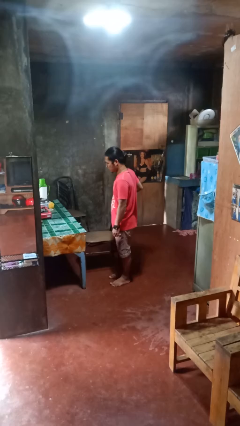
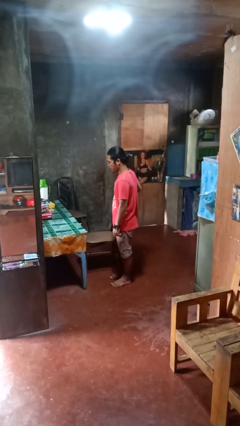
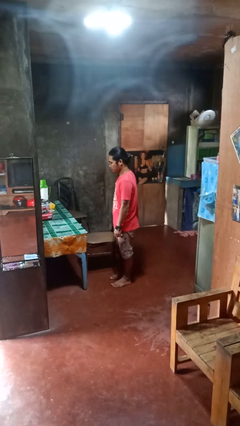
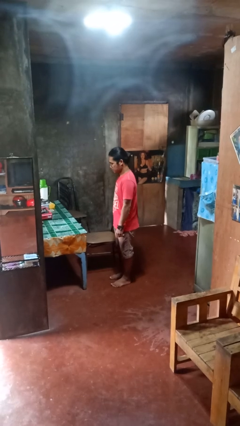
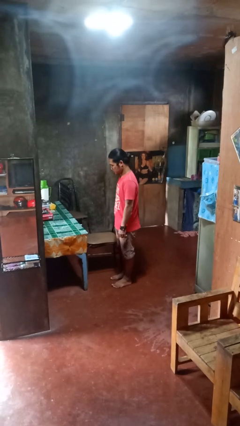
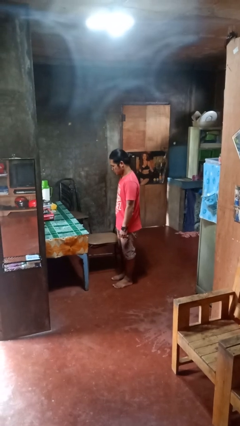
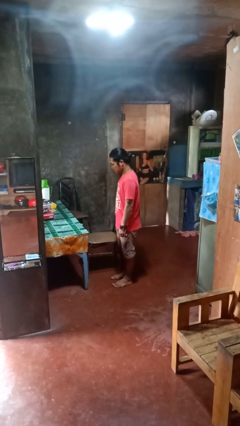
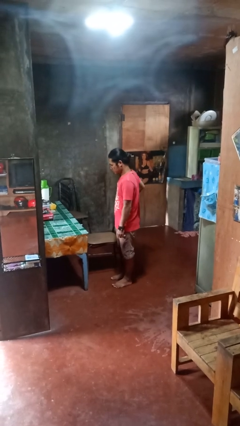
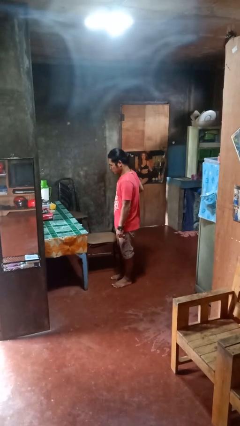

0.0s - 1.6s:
person pulls out chair

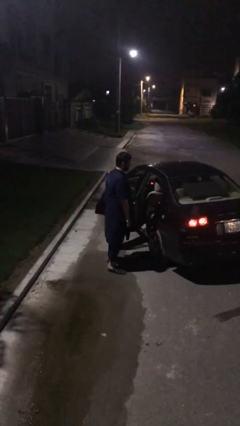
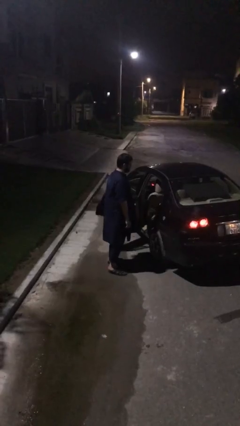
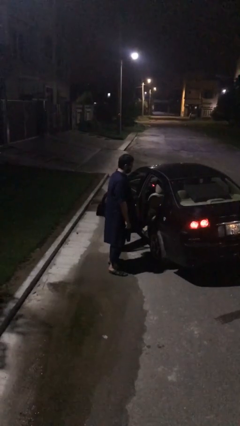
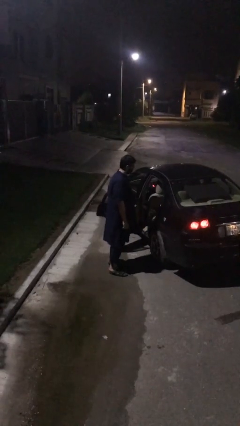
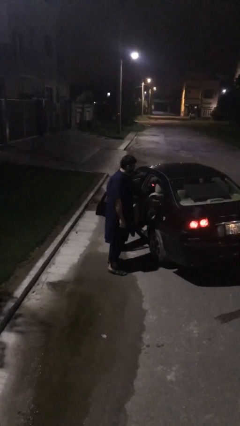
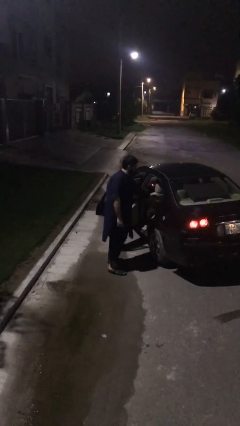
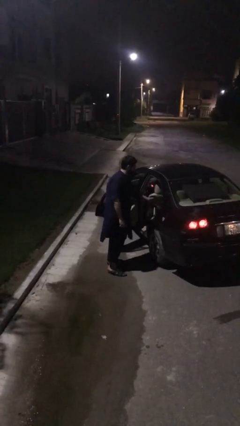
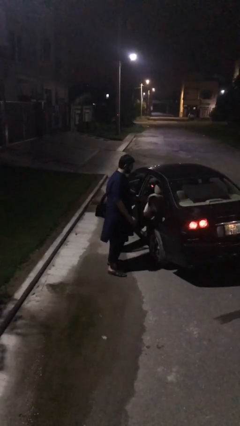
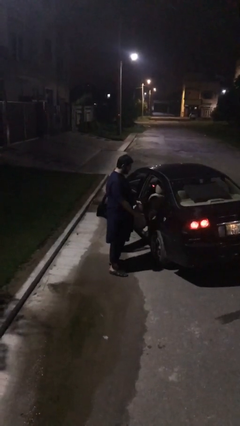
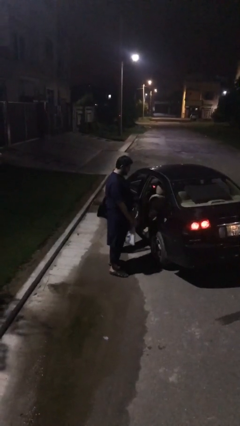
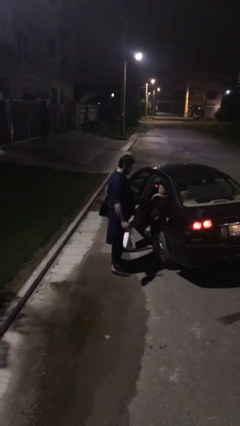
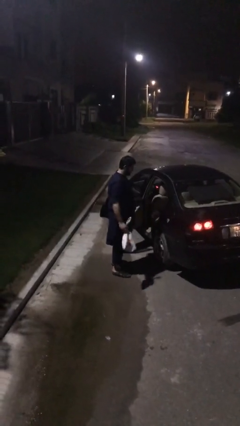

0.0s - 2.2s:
person unloads car

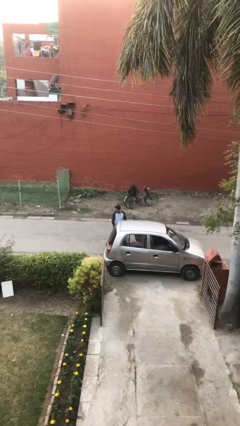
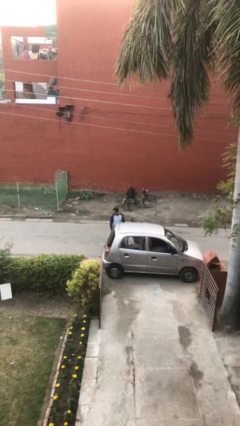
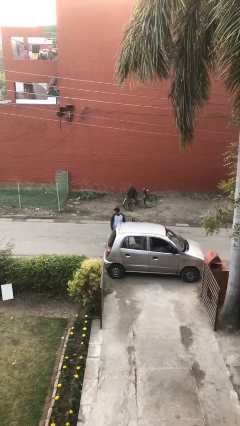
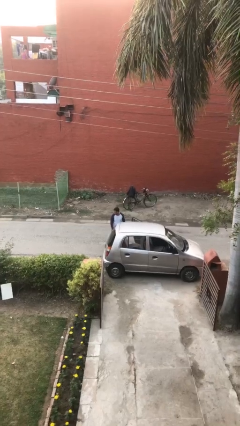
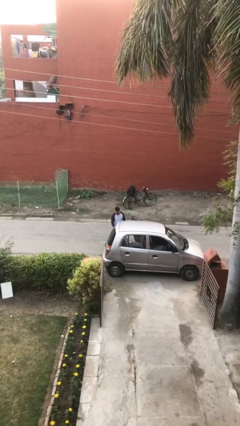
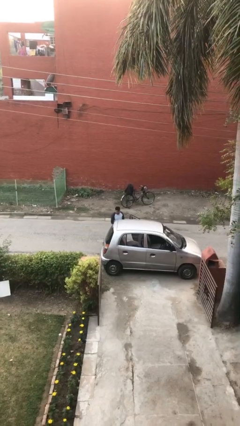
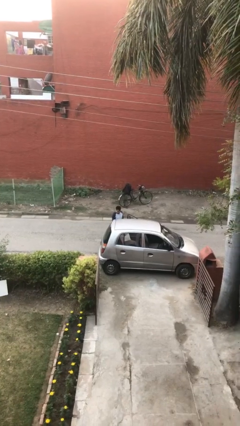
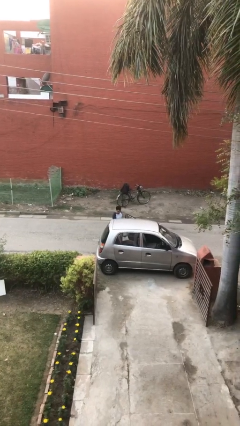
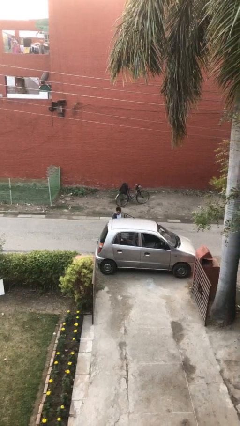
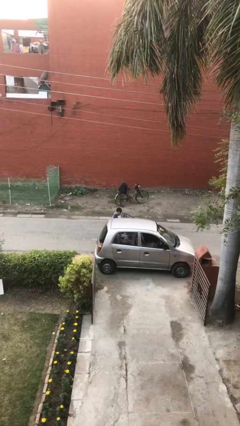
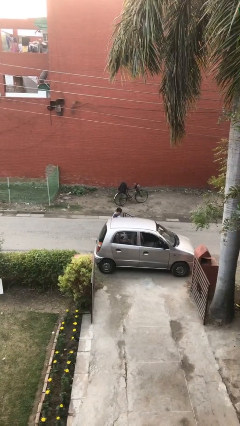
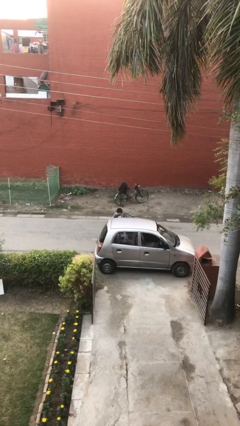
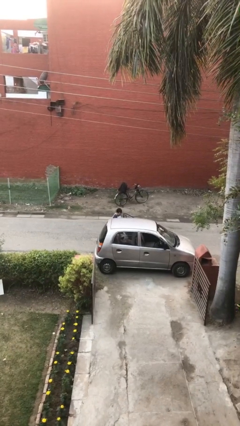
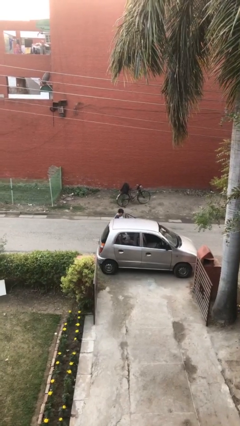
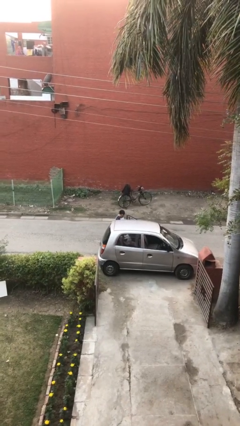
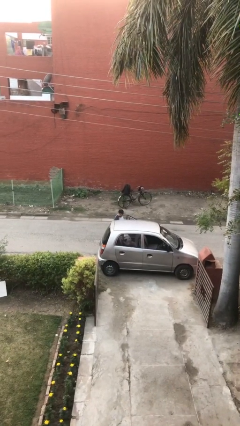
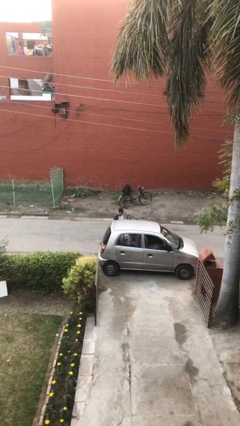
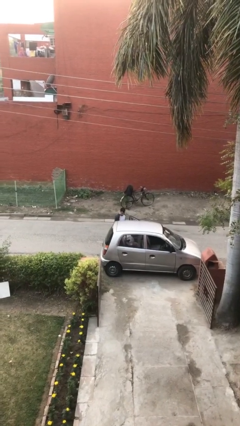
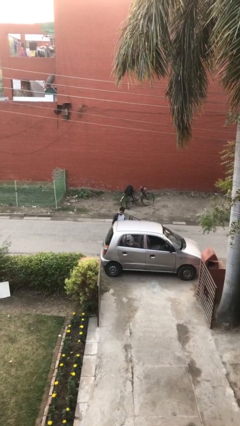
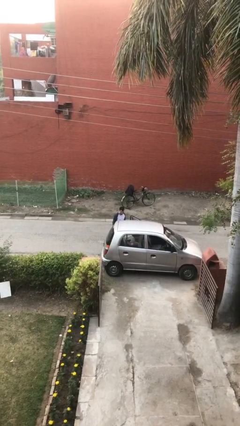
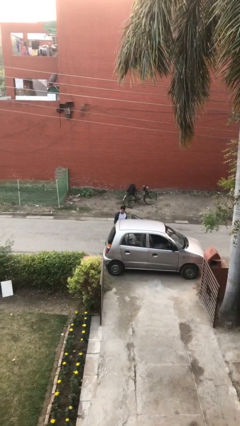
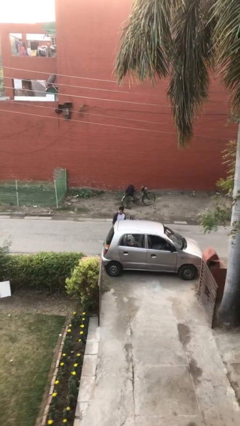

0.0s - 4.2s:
person loads car

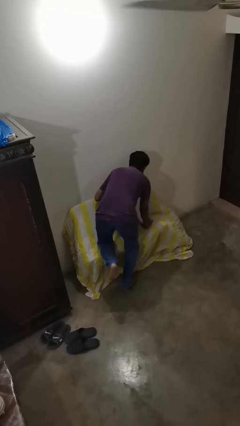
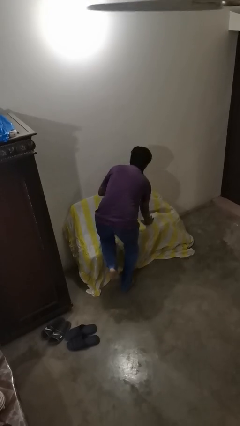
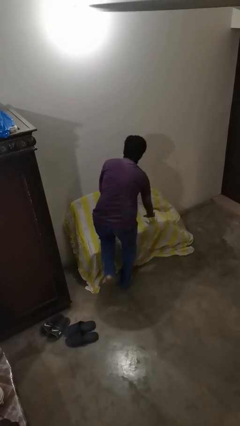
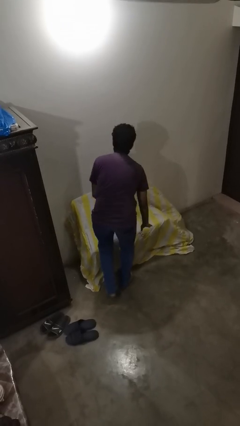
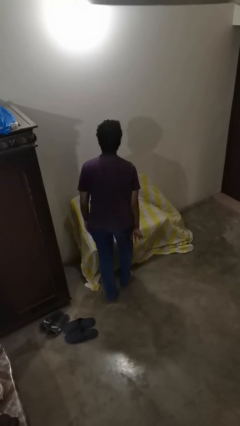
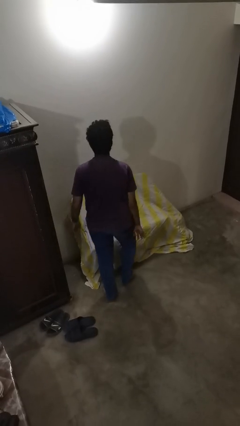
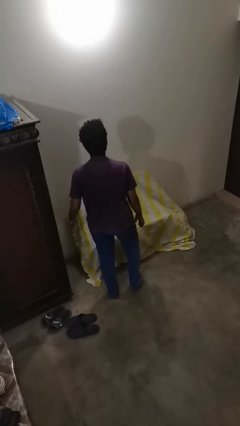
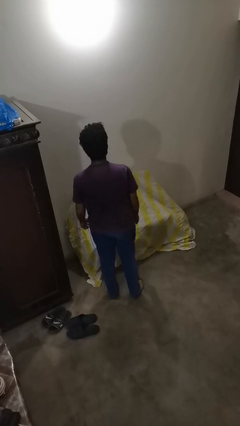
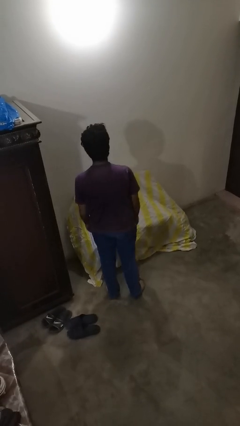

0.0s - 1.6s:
person stands up

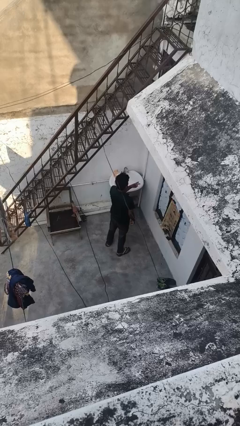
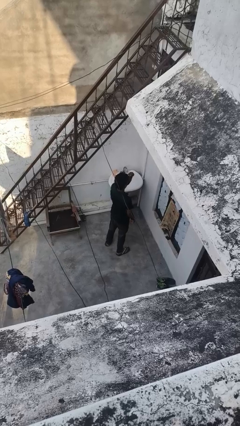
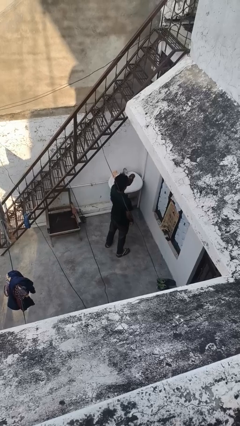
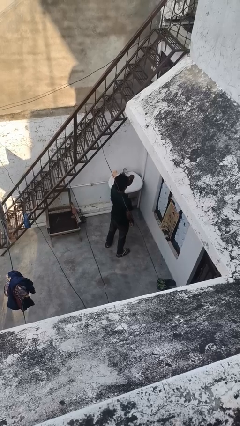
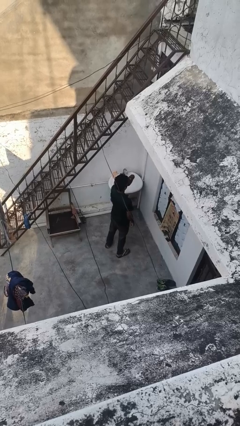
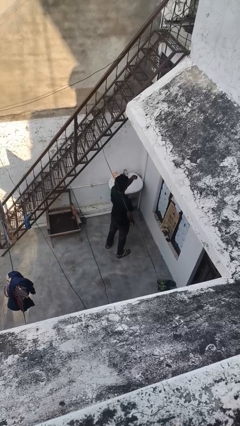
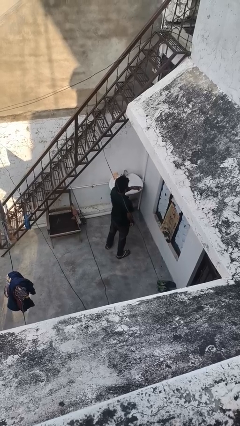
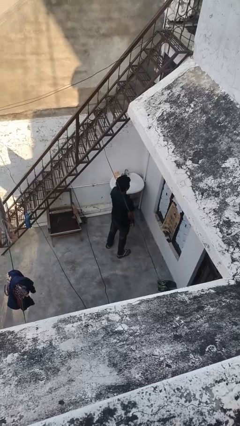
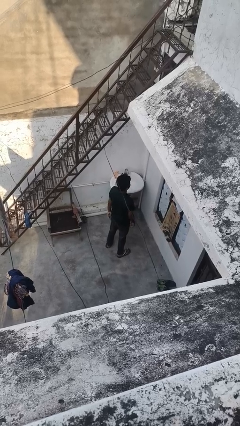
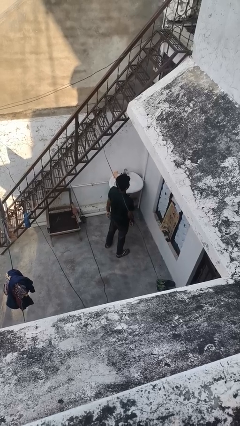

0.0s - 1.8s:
person gestures watch closely

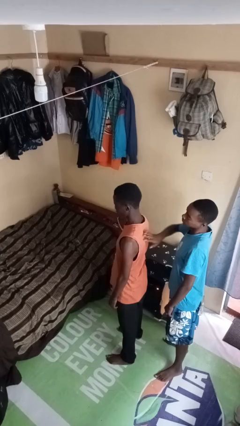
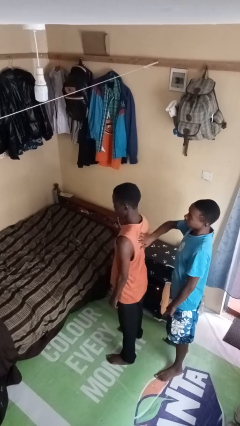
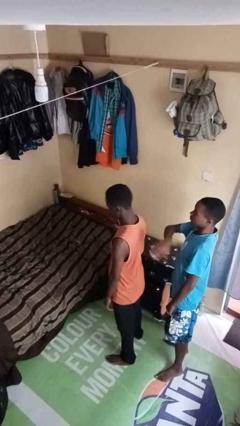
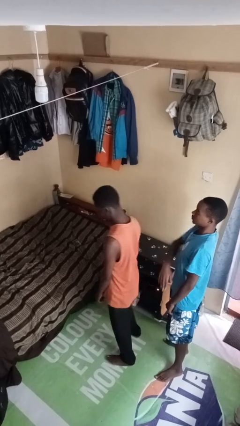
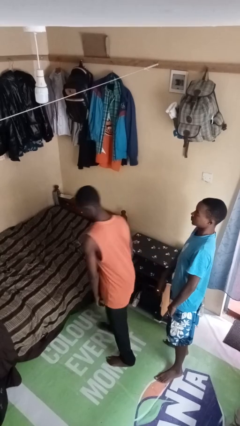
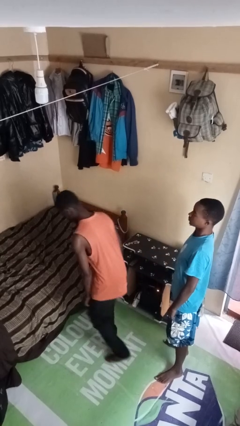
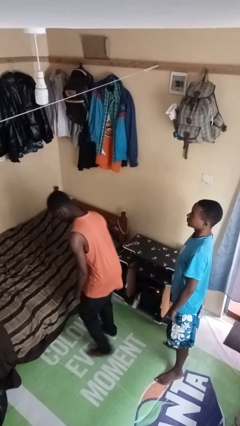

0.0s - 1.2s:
person shoves person

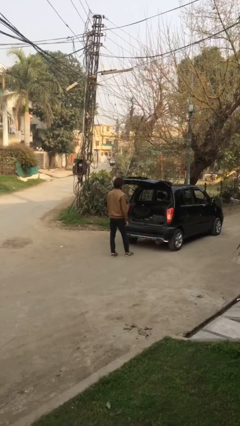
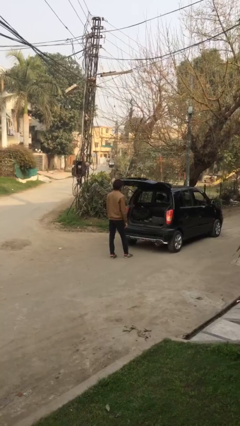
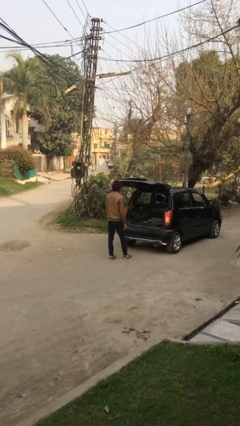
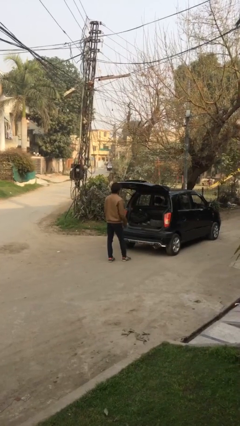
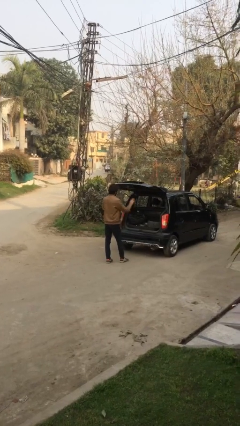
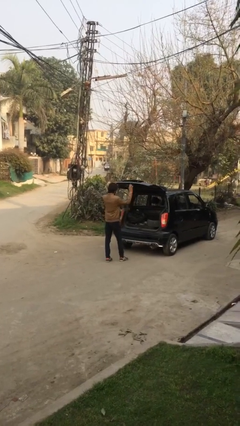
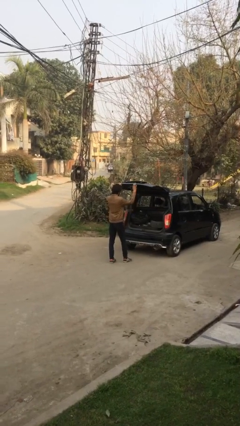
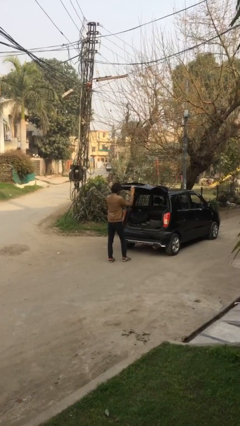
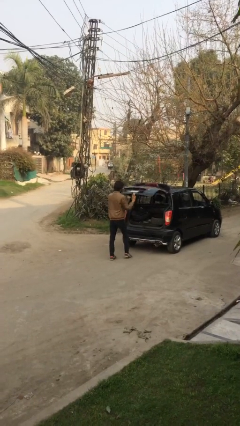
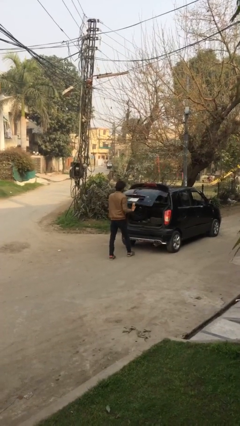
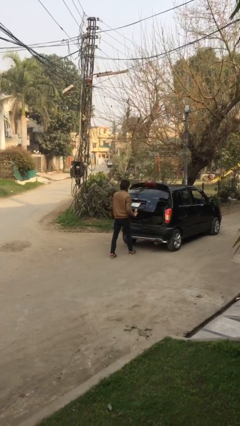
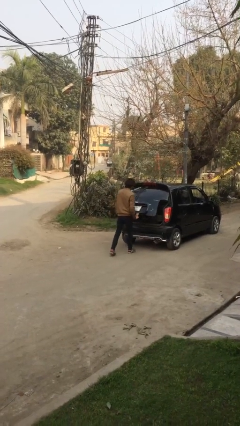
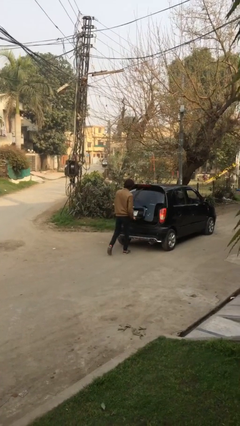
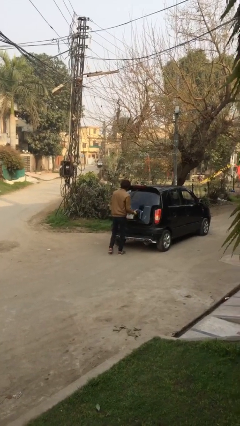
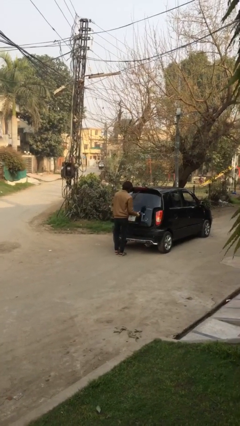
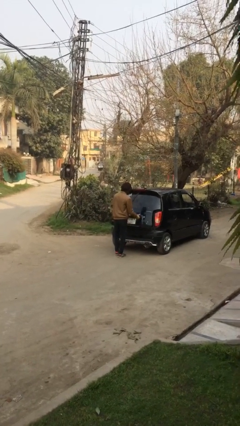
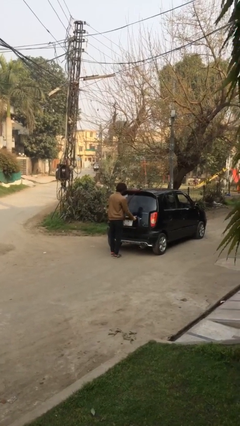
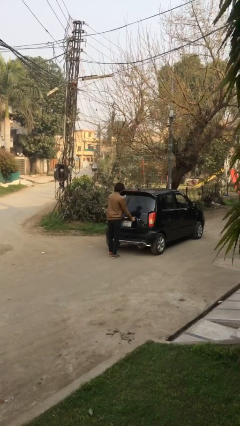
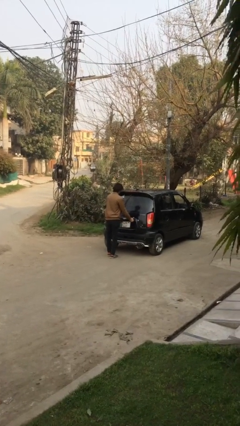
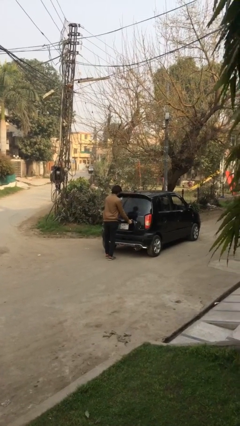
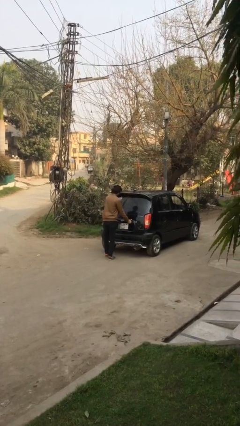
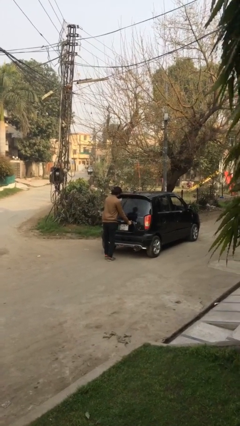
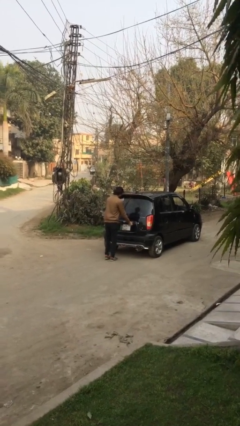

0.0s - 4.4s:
person closes car trunk

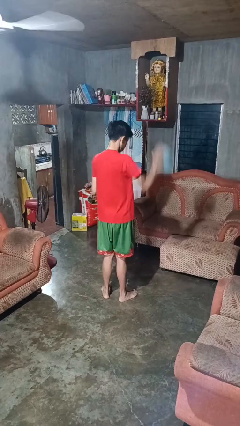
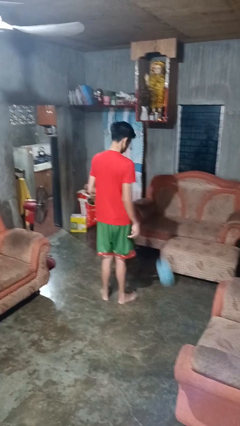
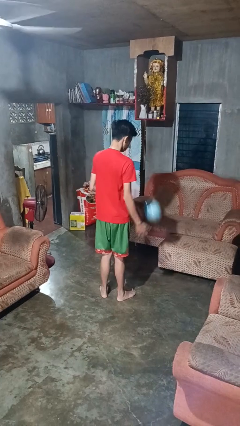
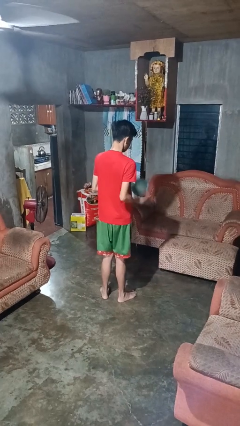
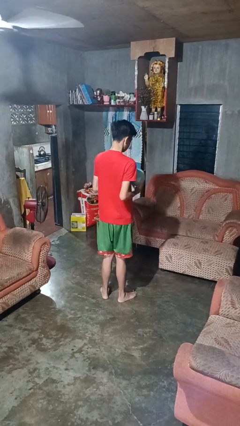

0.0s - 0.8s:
person bounces ball on floor
